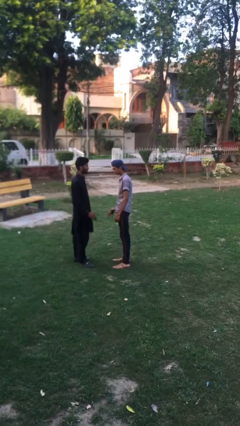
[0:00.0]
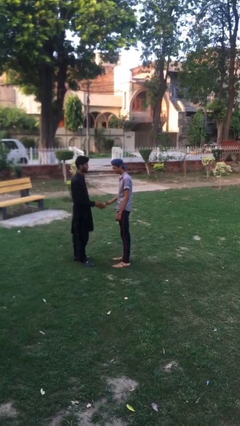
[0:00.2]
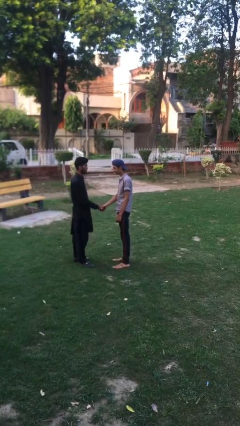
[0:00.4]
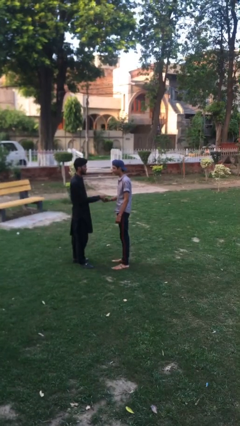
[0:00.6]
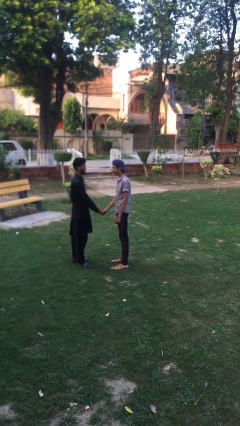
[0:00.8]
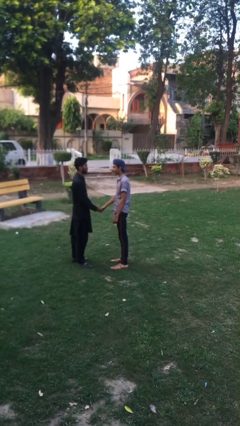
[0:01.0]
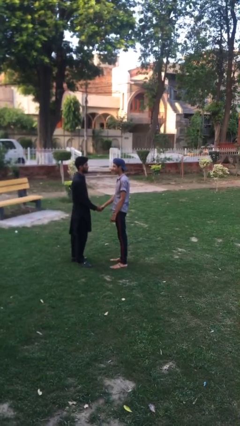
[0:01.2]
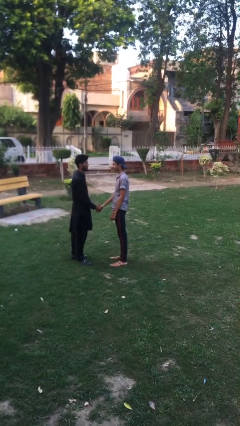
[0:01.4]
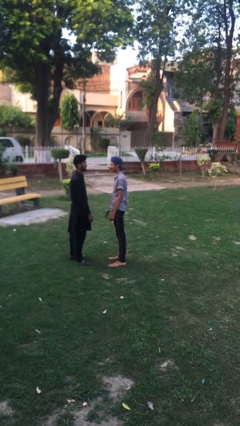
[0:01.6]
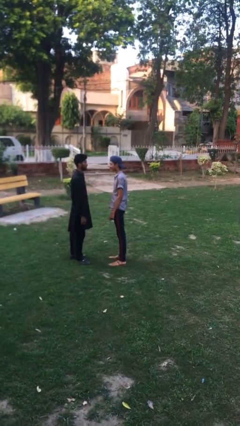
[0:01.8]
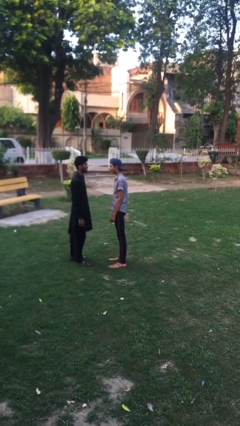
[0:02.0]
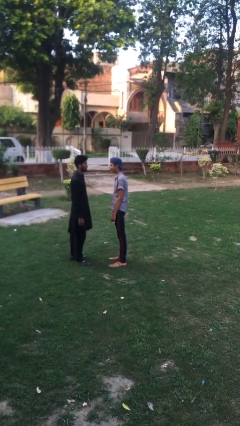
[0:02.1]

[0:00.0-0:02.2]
person shakes hand

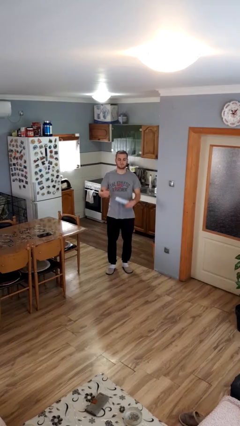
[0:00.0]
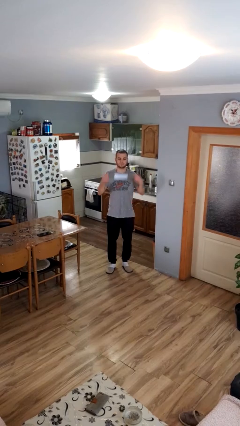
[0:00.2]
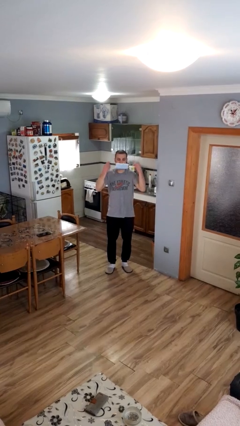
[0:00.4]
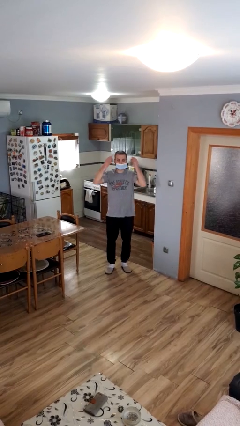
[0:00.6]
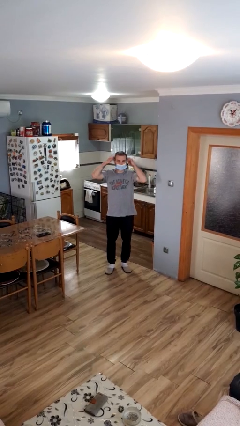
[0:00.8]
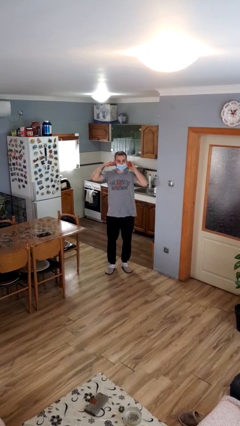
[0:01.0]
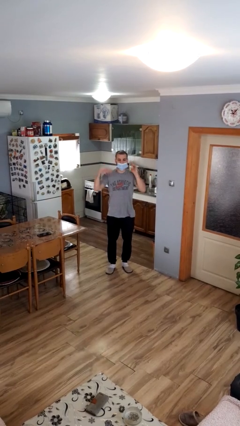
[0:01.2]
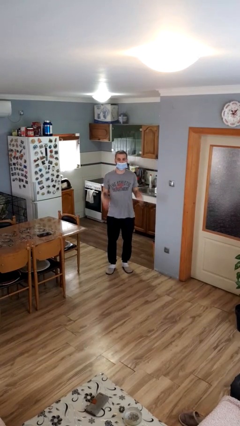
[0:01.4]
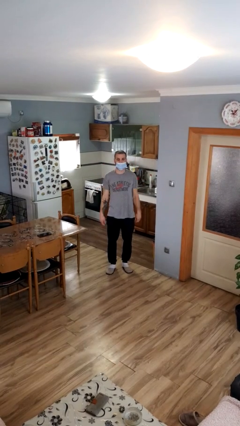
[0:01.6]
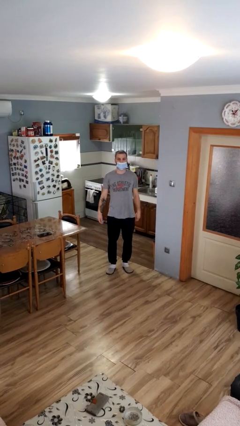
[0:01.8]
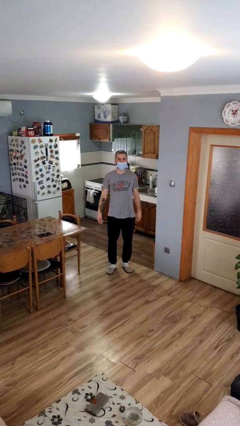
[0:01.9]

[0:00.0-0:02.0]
person puts on facemask

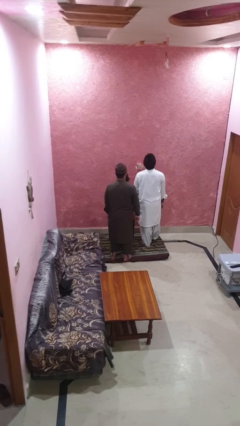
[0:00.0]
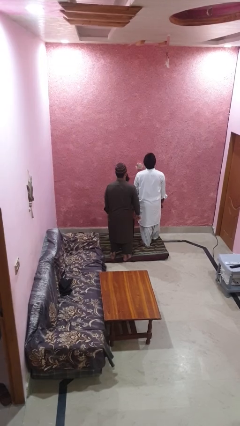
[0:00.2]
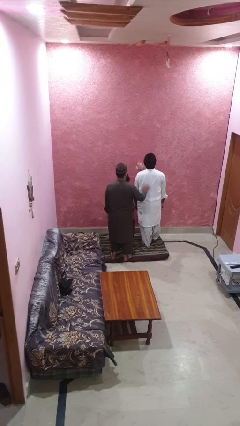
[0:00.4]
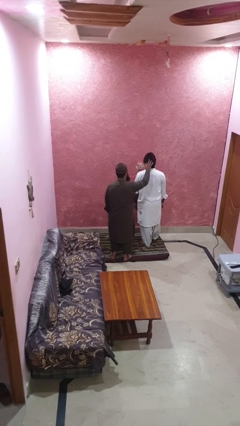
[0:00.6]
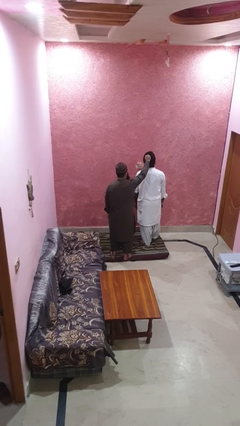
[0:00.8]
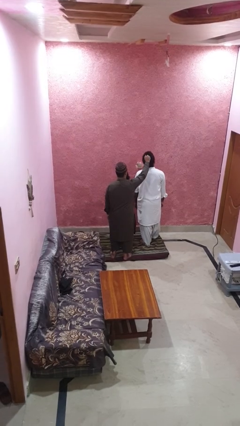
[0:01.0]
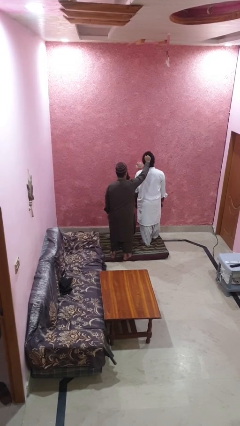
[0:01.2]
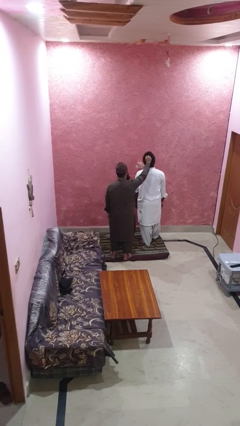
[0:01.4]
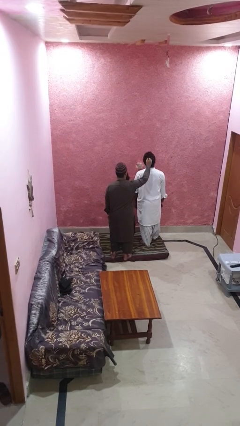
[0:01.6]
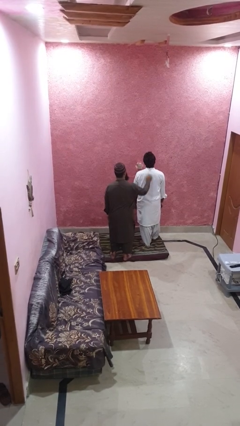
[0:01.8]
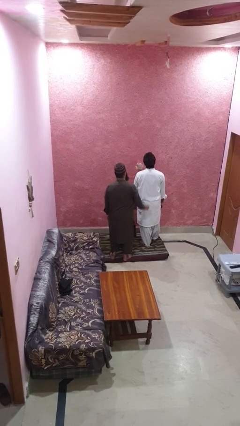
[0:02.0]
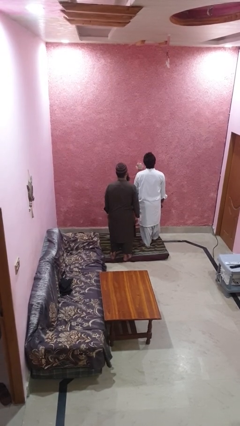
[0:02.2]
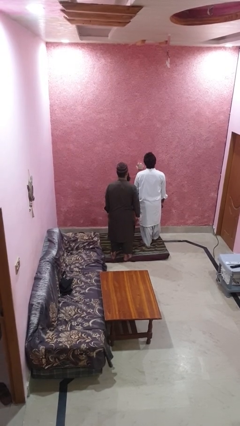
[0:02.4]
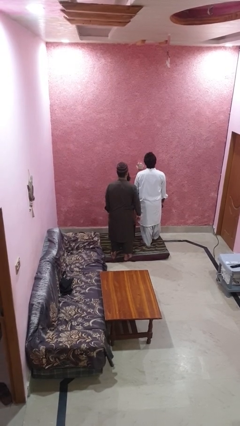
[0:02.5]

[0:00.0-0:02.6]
person grabs person by hair

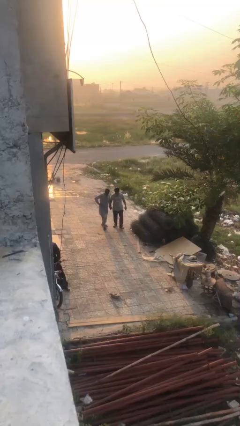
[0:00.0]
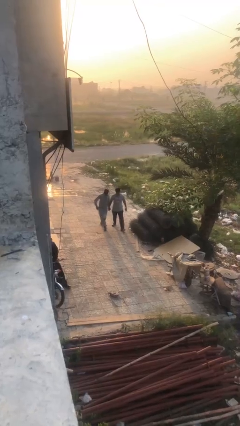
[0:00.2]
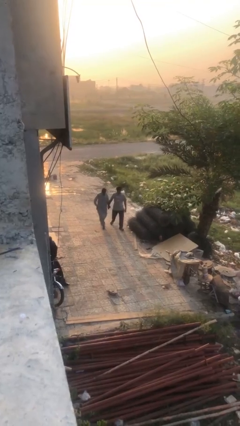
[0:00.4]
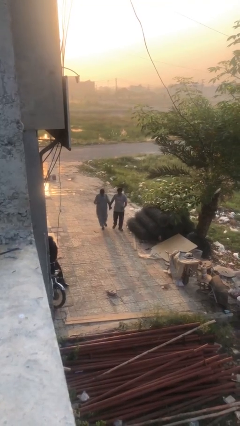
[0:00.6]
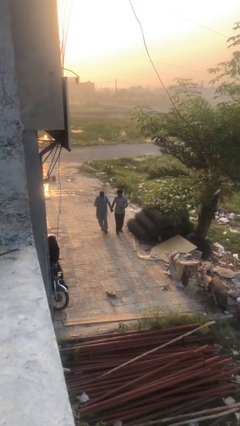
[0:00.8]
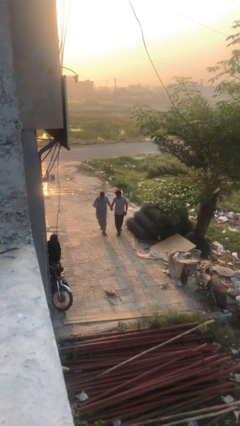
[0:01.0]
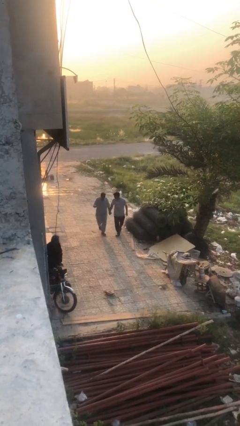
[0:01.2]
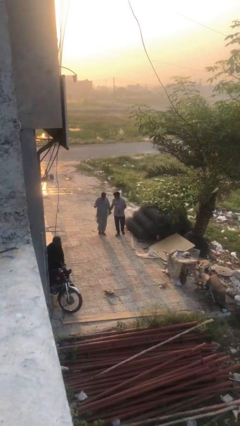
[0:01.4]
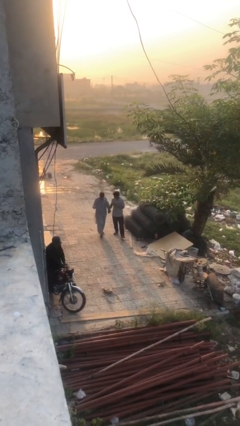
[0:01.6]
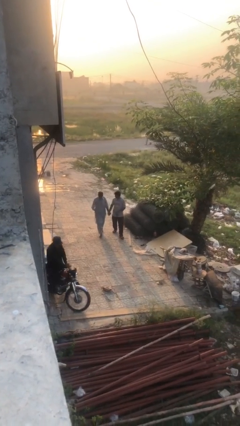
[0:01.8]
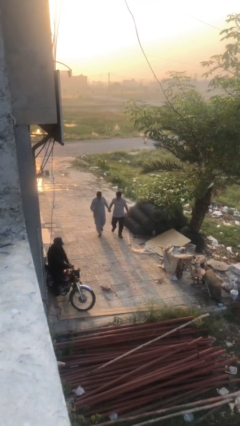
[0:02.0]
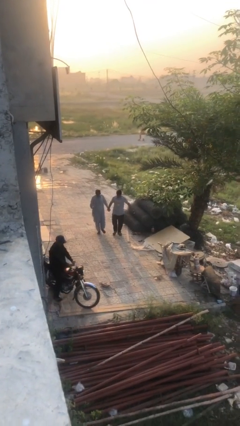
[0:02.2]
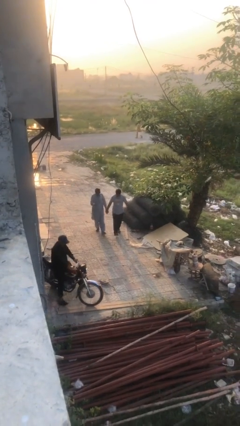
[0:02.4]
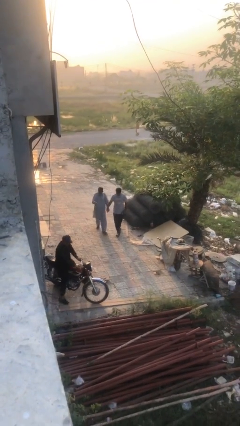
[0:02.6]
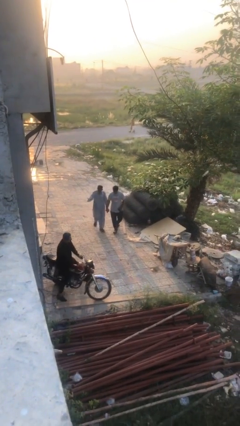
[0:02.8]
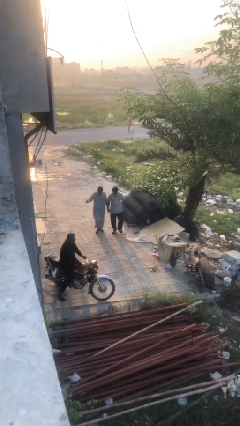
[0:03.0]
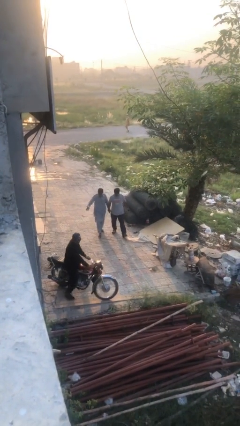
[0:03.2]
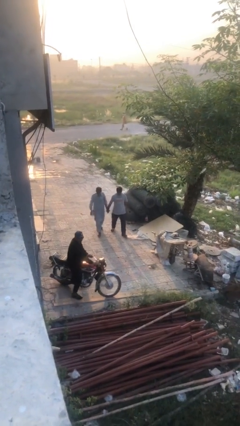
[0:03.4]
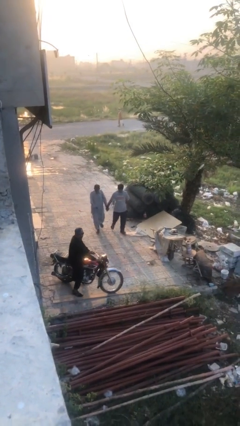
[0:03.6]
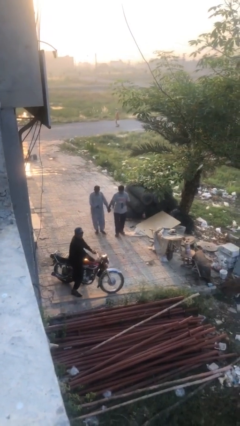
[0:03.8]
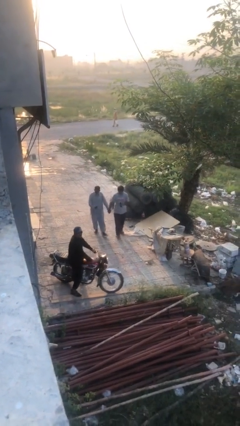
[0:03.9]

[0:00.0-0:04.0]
person holds hand

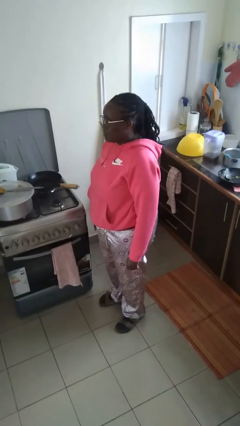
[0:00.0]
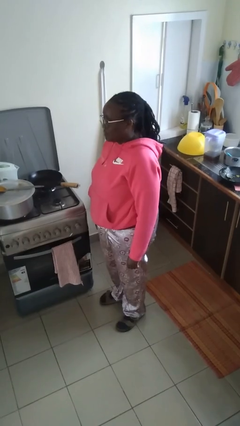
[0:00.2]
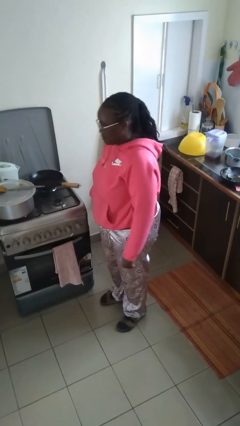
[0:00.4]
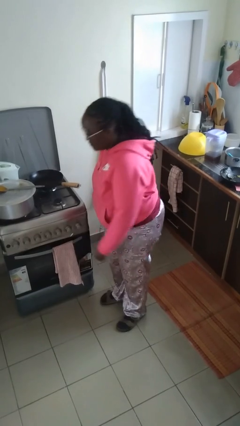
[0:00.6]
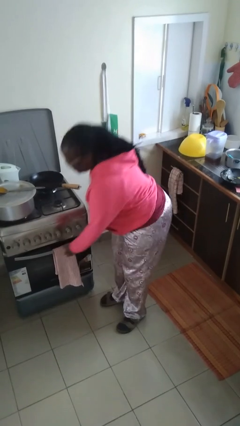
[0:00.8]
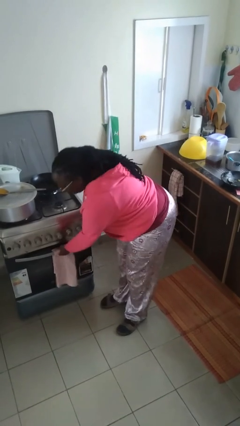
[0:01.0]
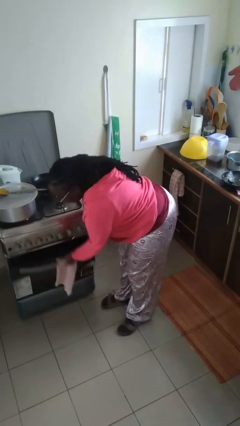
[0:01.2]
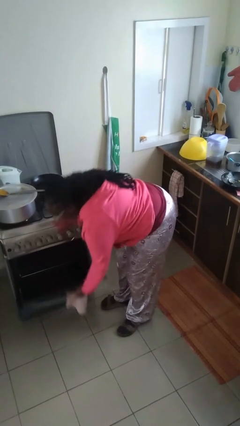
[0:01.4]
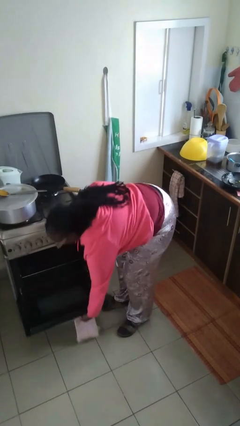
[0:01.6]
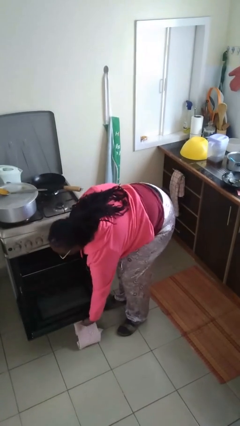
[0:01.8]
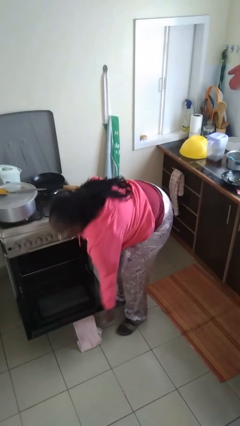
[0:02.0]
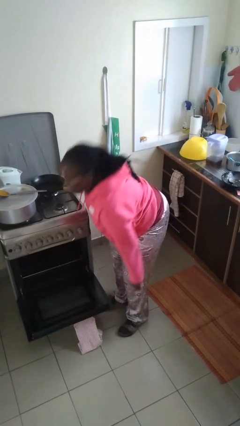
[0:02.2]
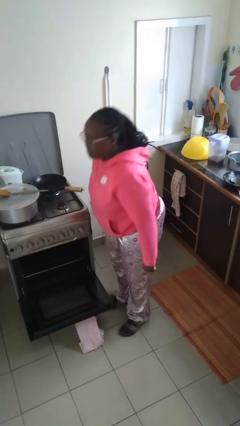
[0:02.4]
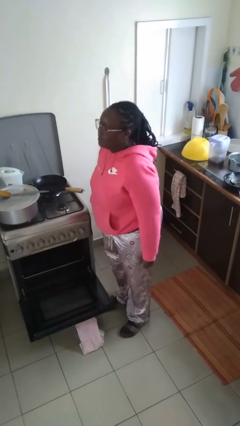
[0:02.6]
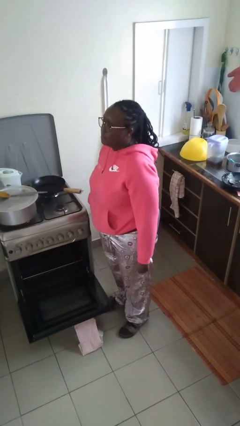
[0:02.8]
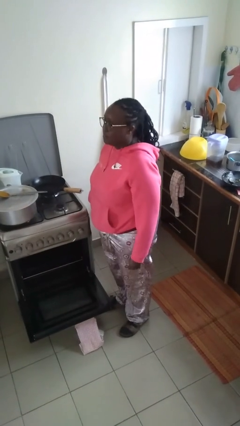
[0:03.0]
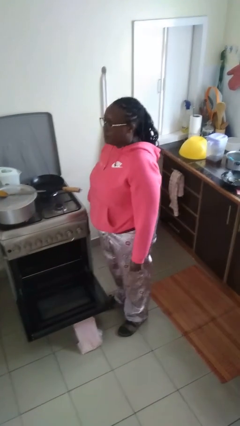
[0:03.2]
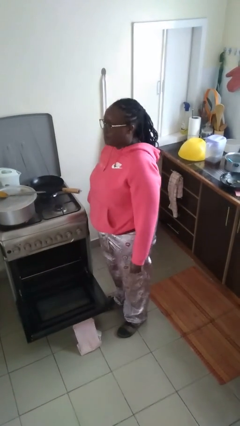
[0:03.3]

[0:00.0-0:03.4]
person opens oven door

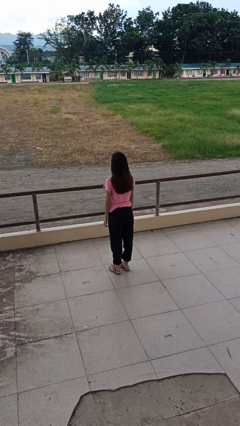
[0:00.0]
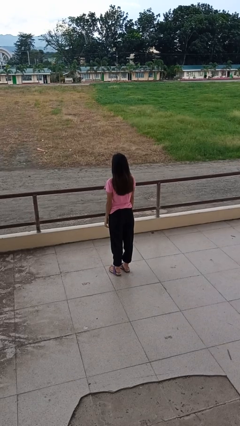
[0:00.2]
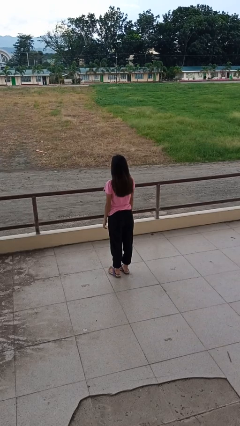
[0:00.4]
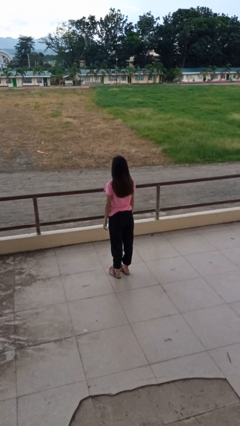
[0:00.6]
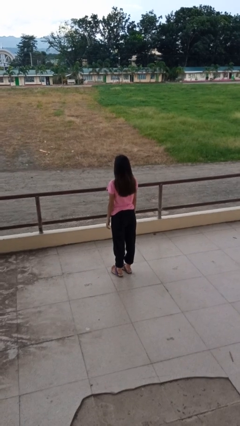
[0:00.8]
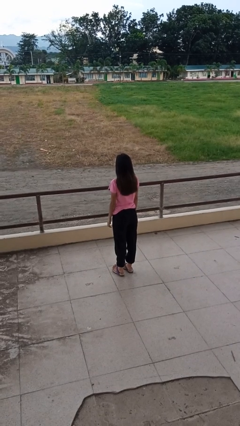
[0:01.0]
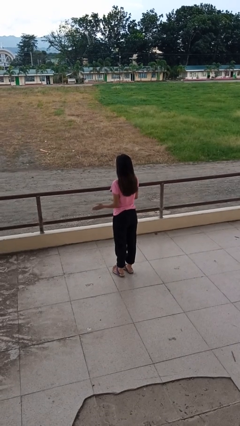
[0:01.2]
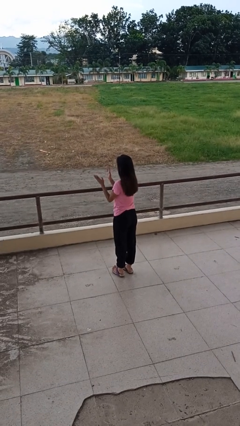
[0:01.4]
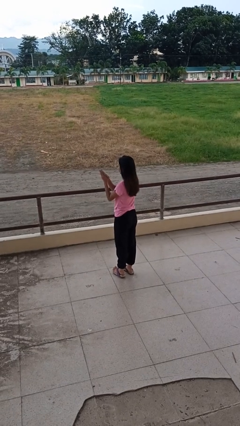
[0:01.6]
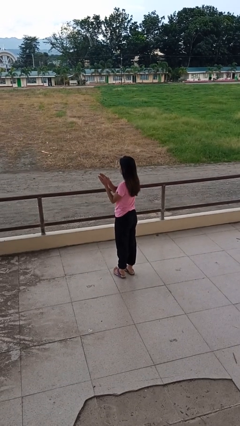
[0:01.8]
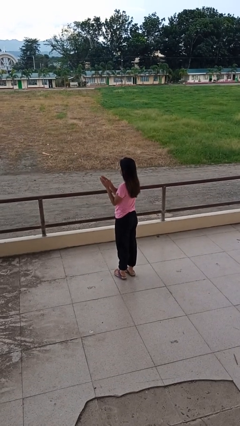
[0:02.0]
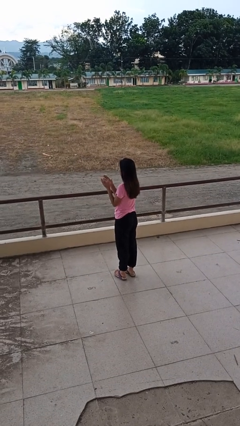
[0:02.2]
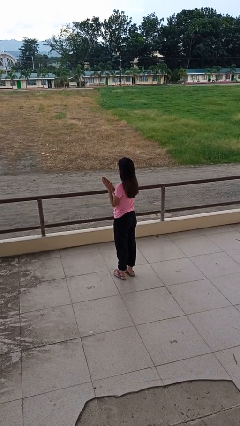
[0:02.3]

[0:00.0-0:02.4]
person claps hands

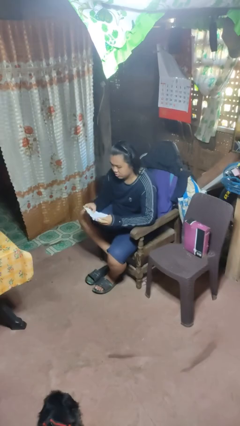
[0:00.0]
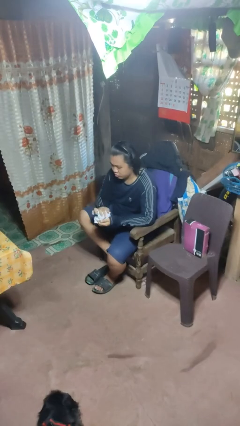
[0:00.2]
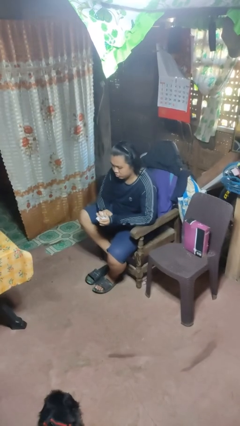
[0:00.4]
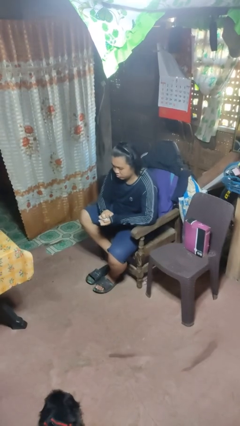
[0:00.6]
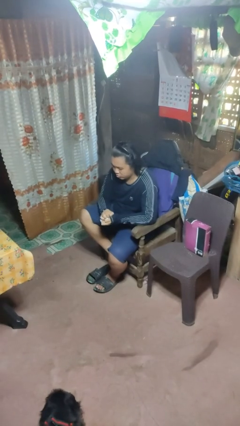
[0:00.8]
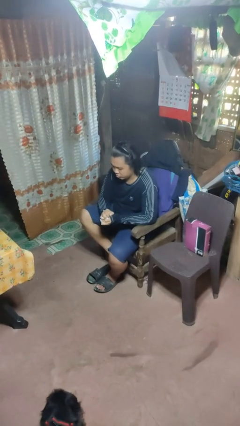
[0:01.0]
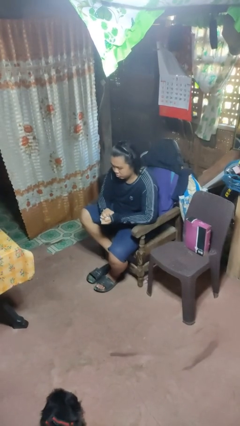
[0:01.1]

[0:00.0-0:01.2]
person crumples paper
